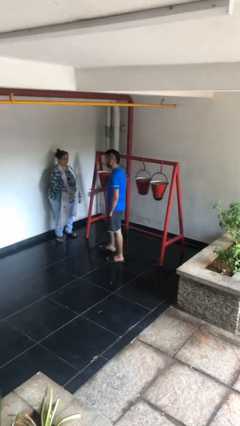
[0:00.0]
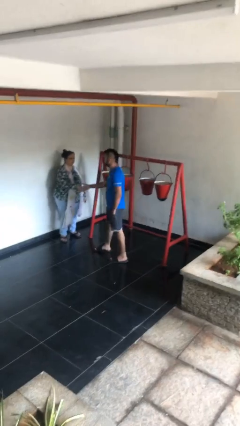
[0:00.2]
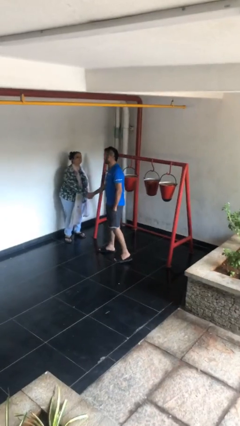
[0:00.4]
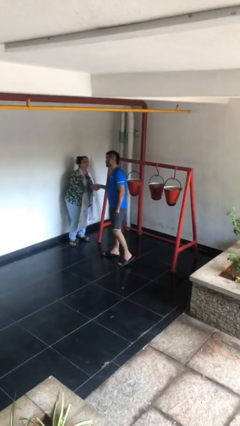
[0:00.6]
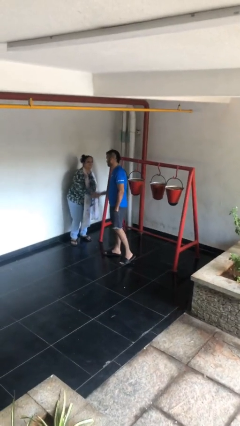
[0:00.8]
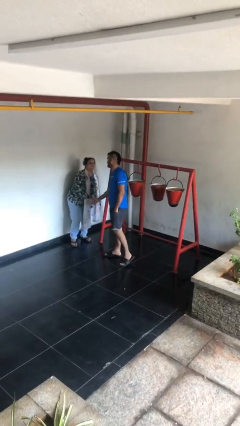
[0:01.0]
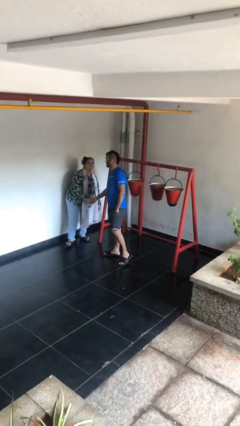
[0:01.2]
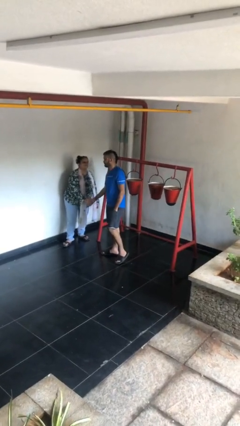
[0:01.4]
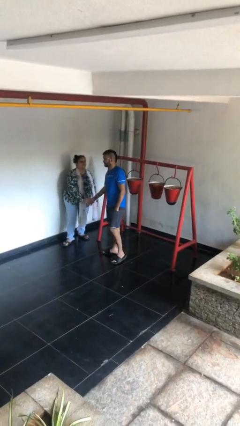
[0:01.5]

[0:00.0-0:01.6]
person shakes hand

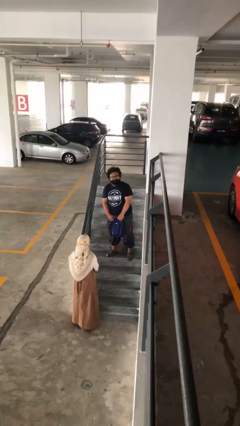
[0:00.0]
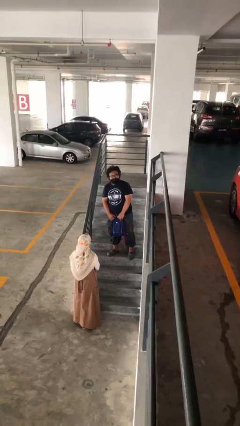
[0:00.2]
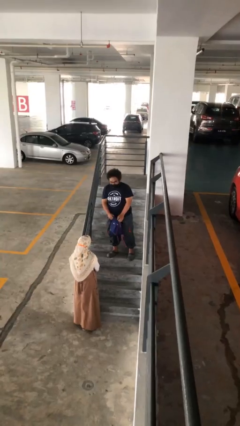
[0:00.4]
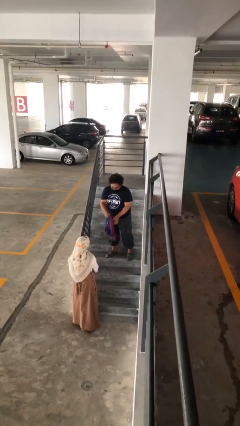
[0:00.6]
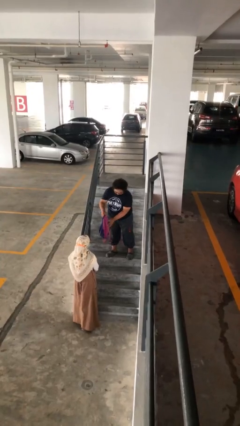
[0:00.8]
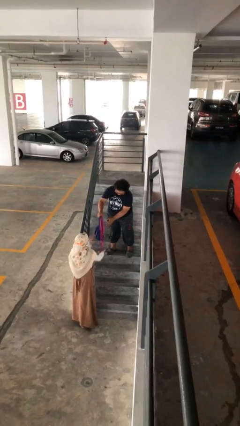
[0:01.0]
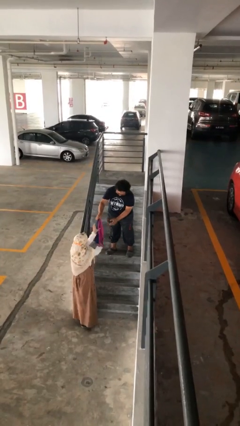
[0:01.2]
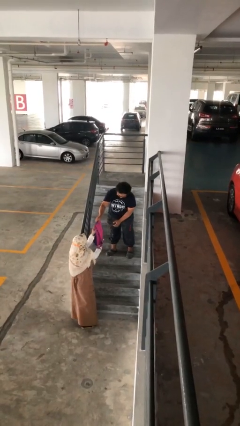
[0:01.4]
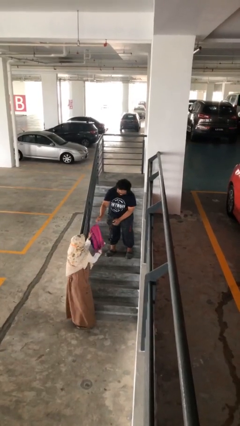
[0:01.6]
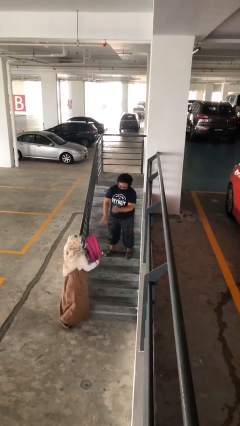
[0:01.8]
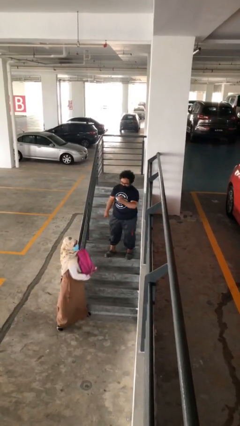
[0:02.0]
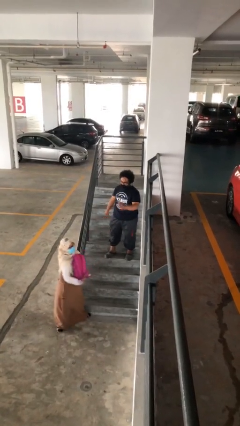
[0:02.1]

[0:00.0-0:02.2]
person transfers object to person

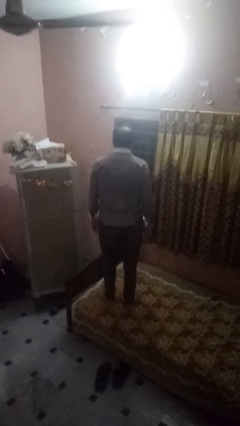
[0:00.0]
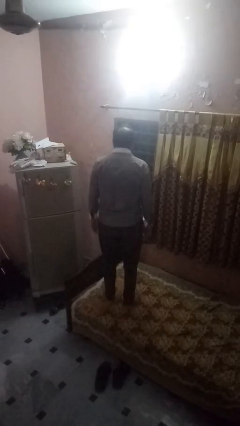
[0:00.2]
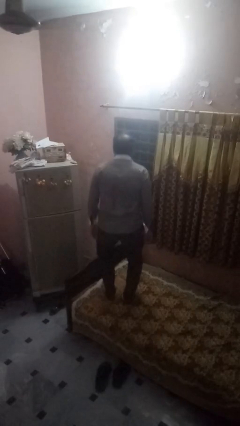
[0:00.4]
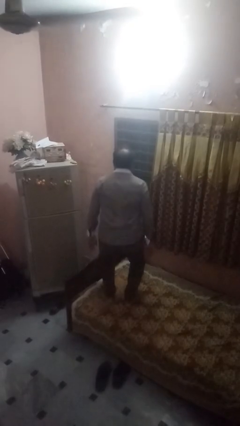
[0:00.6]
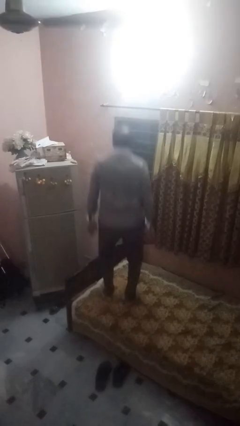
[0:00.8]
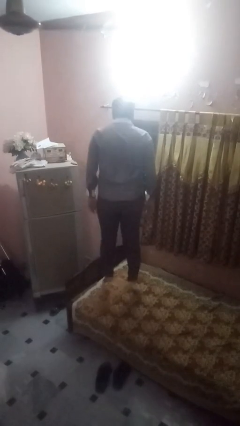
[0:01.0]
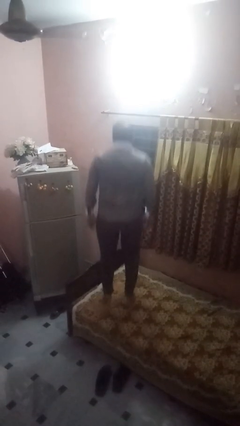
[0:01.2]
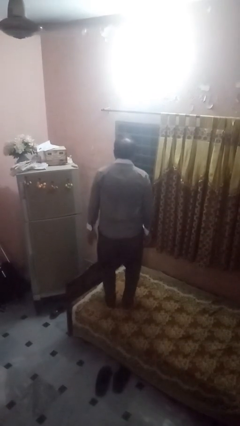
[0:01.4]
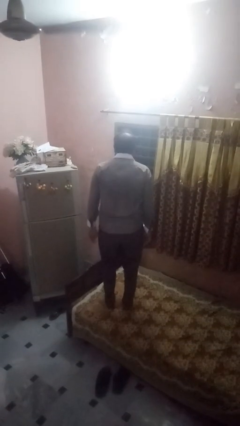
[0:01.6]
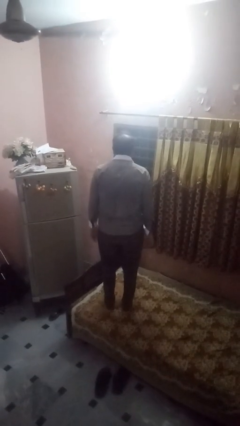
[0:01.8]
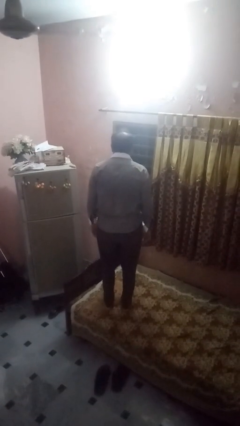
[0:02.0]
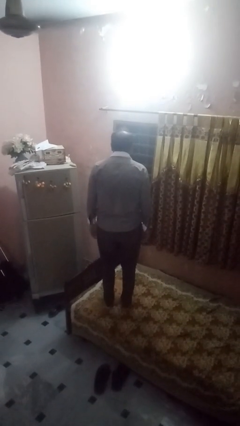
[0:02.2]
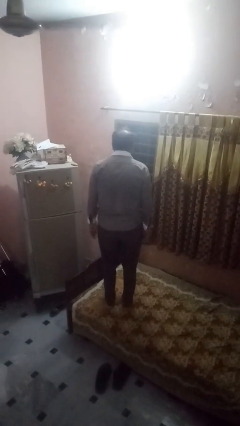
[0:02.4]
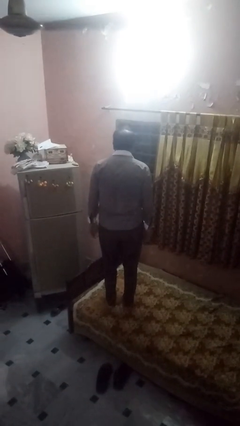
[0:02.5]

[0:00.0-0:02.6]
person jumps on bed

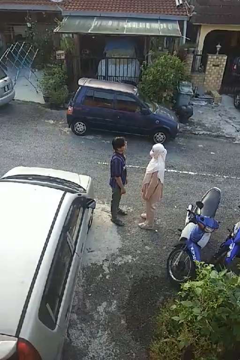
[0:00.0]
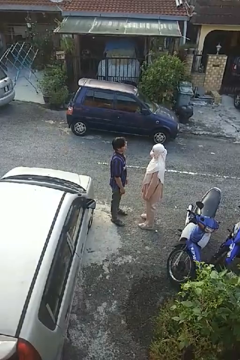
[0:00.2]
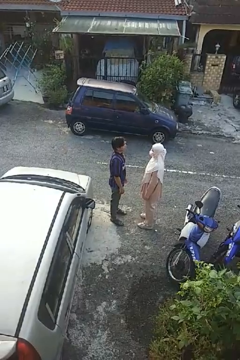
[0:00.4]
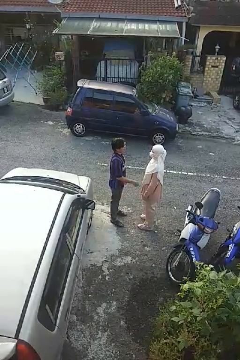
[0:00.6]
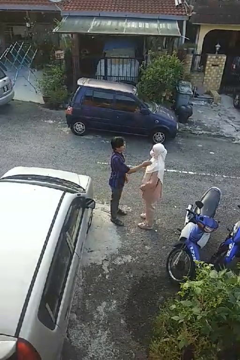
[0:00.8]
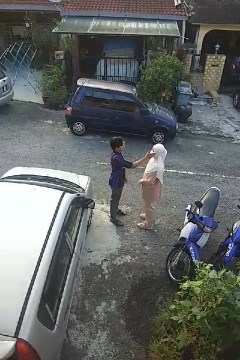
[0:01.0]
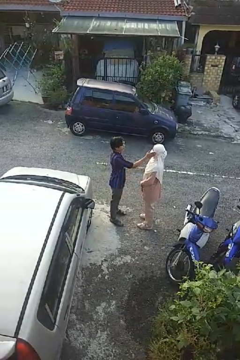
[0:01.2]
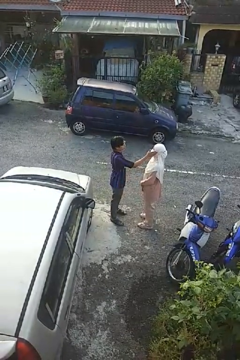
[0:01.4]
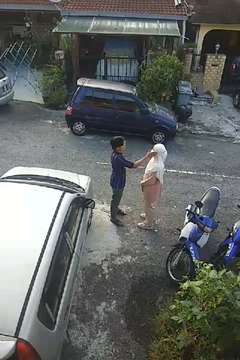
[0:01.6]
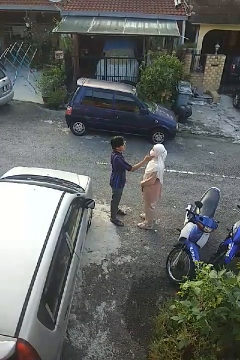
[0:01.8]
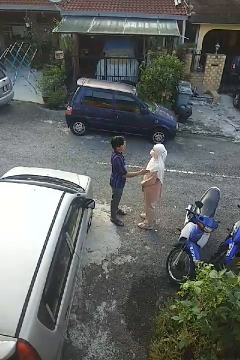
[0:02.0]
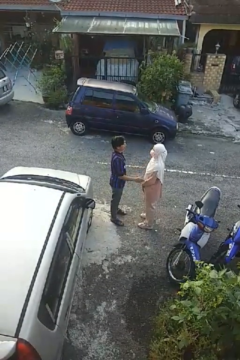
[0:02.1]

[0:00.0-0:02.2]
person touches face of person

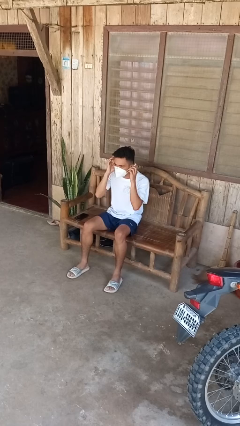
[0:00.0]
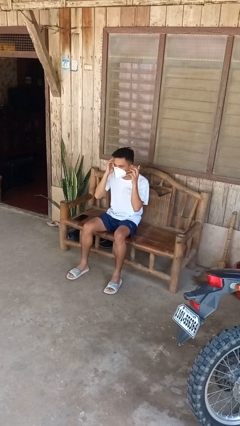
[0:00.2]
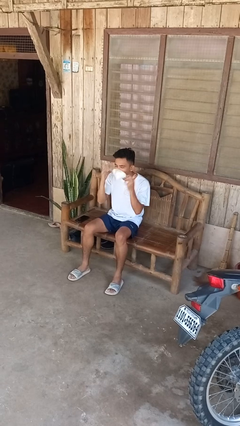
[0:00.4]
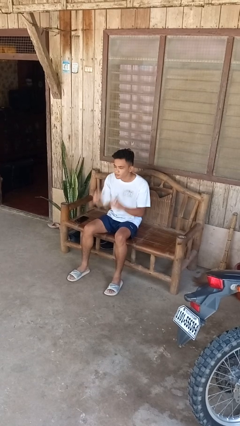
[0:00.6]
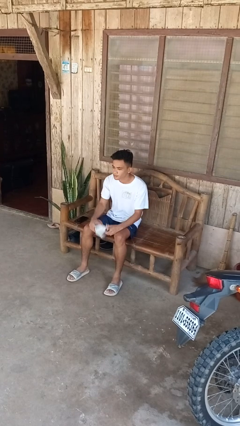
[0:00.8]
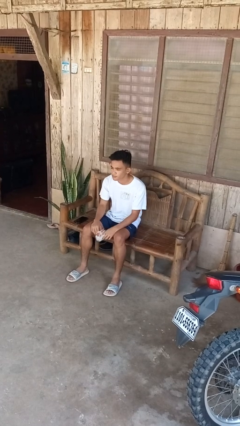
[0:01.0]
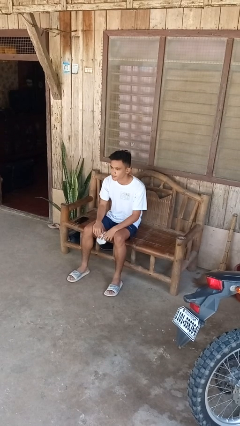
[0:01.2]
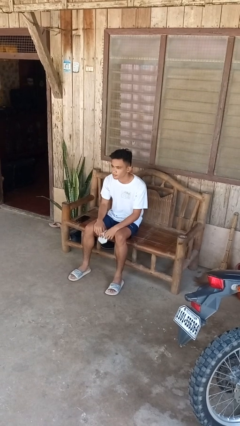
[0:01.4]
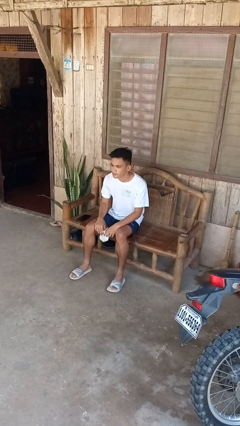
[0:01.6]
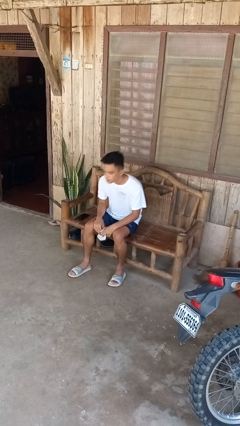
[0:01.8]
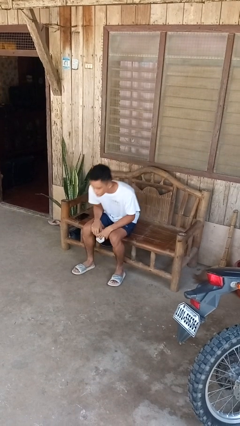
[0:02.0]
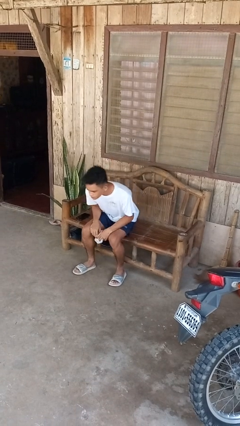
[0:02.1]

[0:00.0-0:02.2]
person takes off facemask

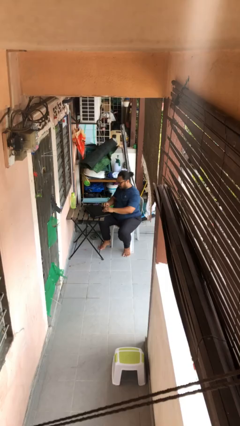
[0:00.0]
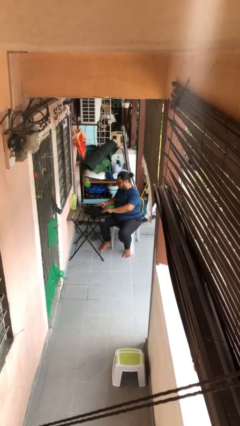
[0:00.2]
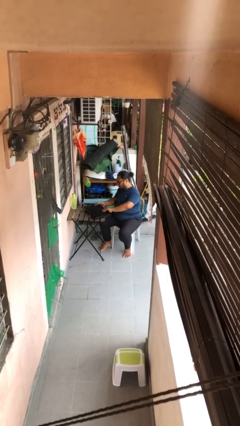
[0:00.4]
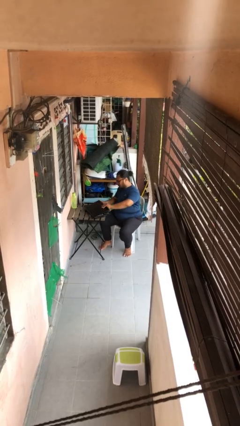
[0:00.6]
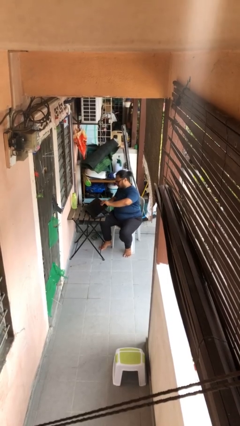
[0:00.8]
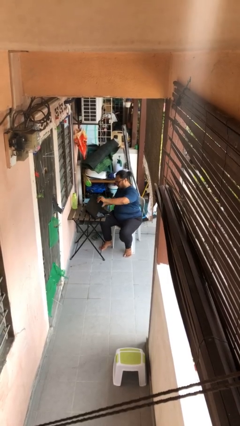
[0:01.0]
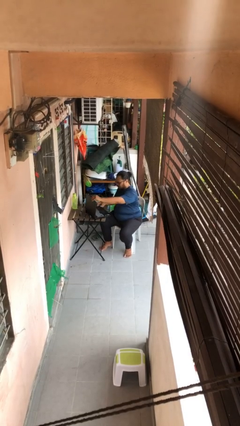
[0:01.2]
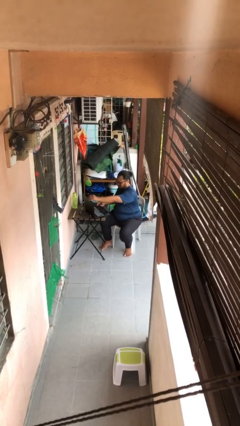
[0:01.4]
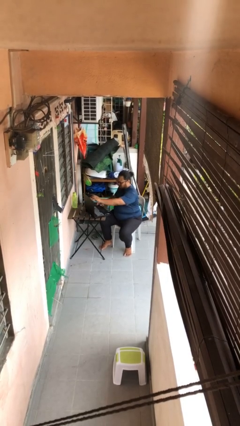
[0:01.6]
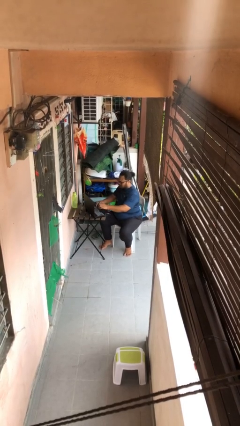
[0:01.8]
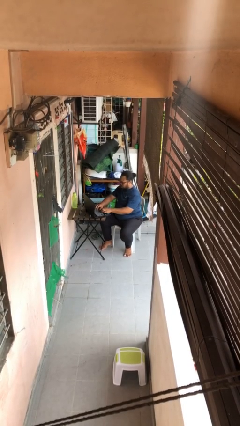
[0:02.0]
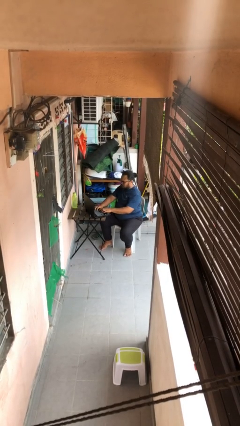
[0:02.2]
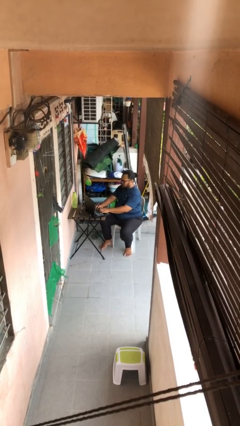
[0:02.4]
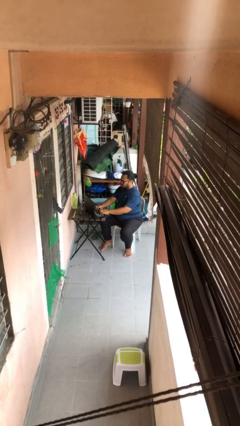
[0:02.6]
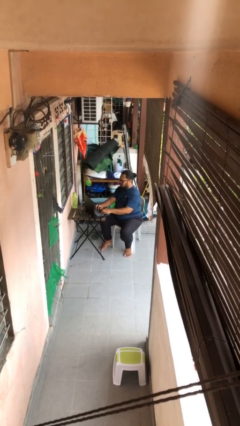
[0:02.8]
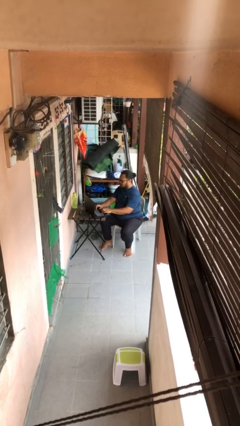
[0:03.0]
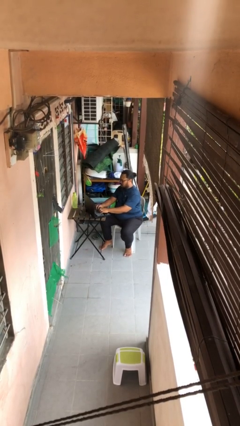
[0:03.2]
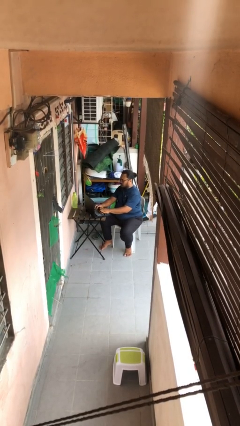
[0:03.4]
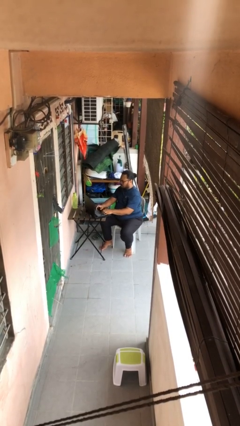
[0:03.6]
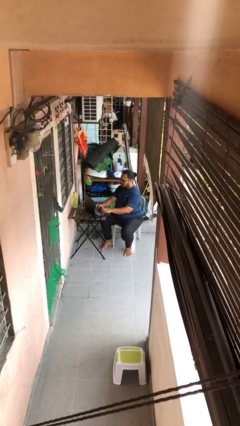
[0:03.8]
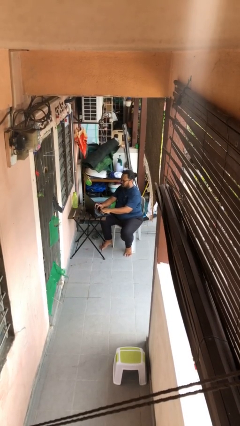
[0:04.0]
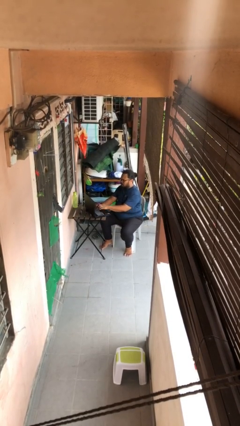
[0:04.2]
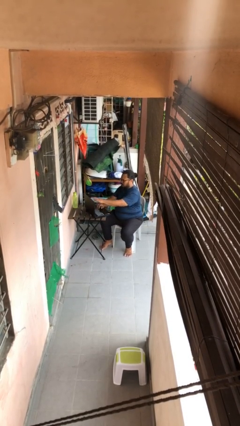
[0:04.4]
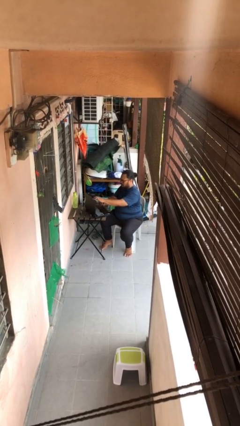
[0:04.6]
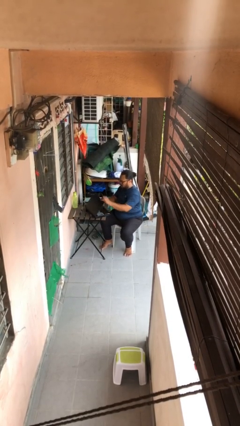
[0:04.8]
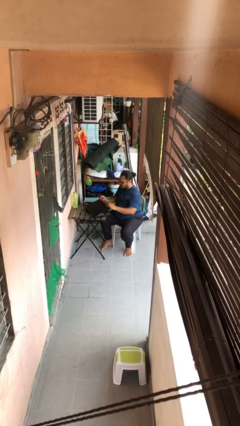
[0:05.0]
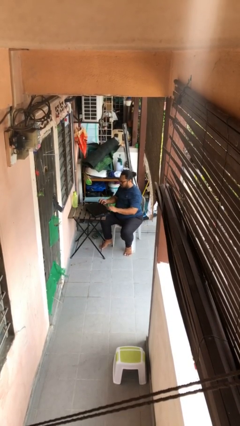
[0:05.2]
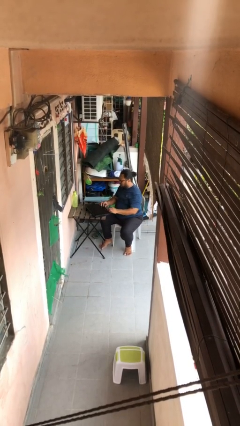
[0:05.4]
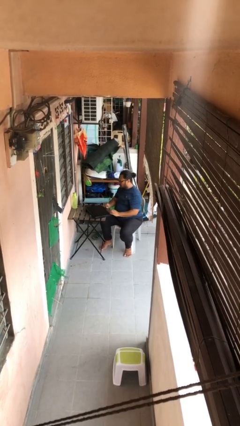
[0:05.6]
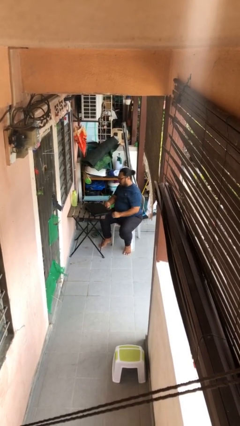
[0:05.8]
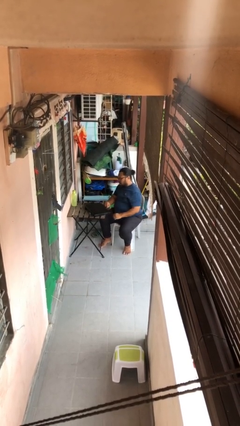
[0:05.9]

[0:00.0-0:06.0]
person interacts with laptop

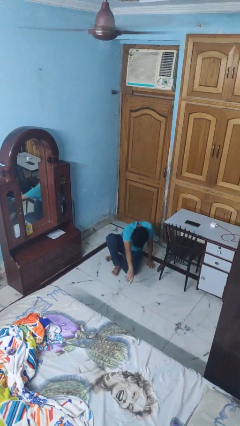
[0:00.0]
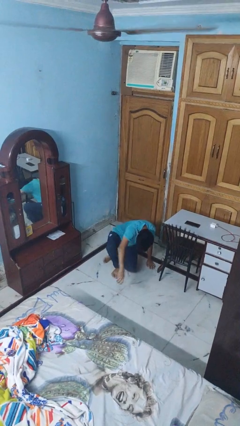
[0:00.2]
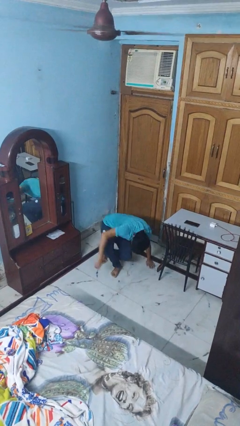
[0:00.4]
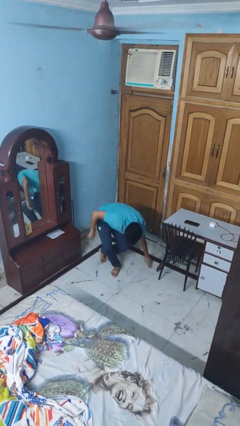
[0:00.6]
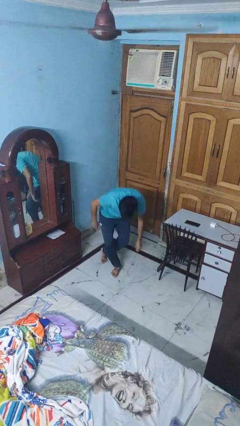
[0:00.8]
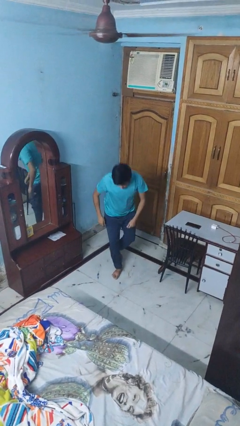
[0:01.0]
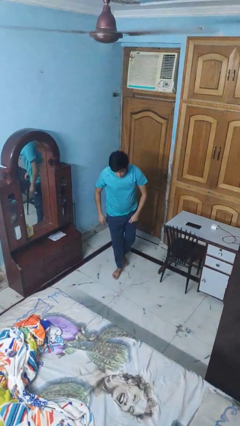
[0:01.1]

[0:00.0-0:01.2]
person stands up from floor
